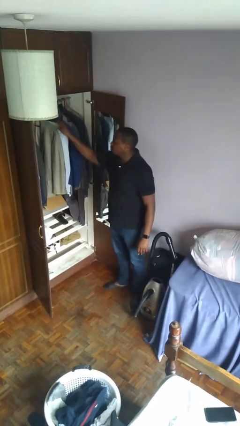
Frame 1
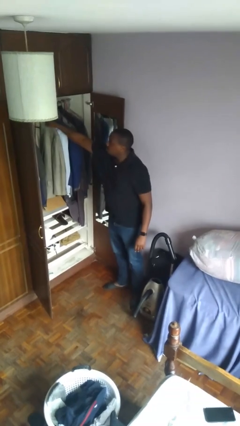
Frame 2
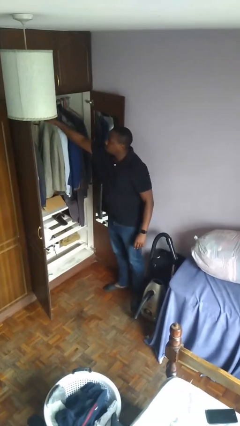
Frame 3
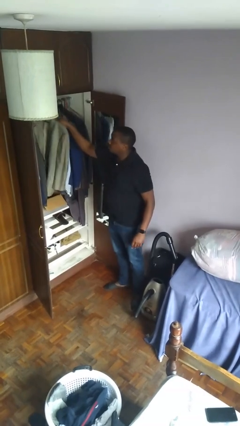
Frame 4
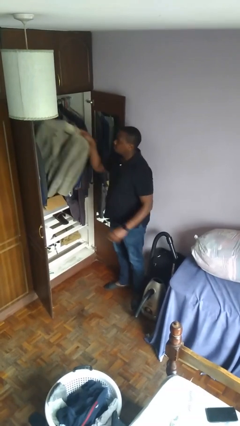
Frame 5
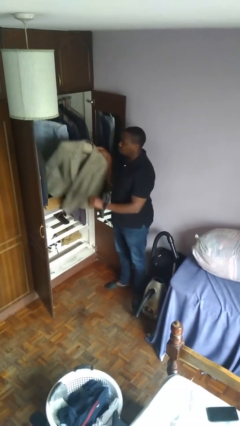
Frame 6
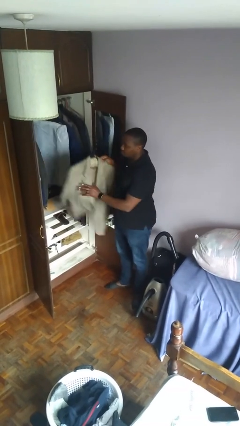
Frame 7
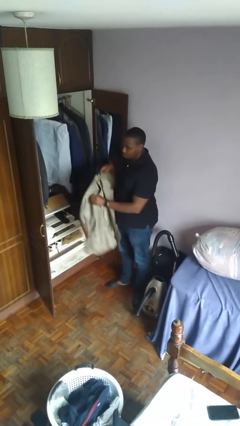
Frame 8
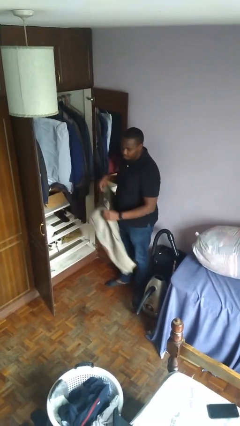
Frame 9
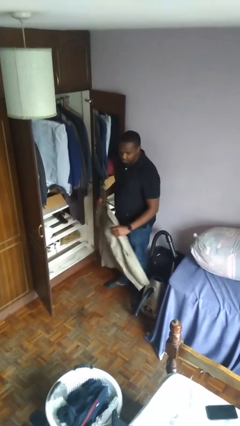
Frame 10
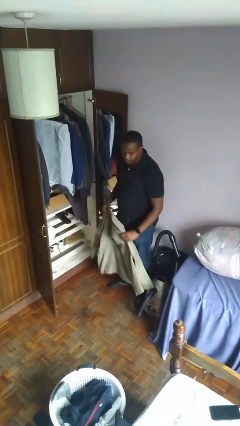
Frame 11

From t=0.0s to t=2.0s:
person takes clothes from closet

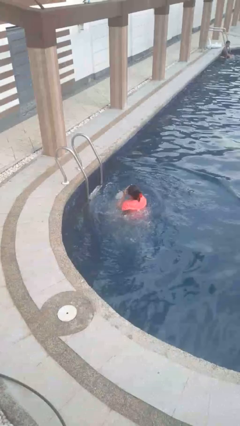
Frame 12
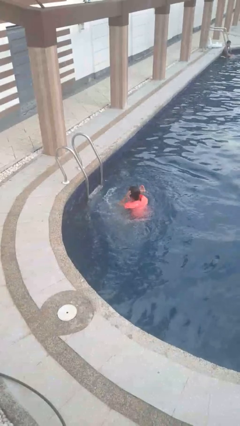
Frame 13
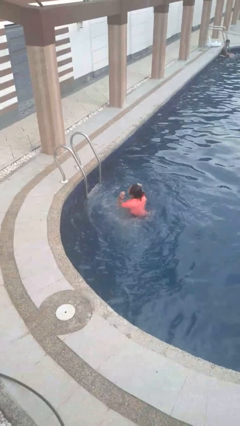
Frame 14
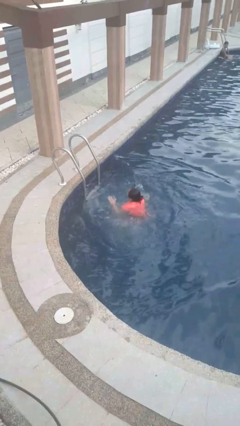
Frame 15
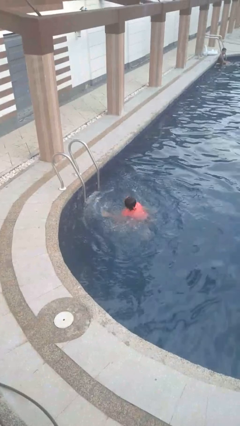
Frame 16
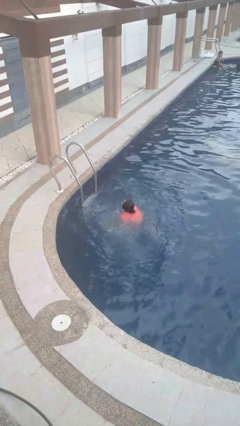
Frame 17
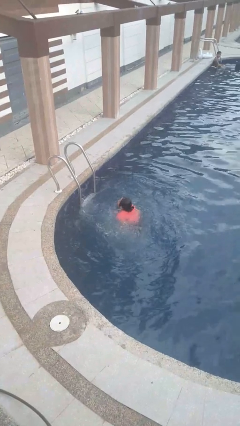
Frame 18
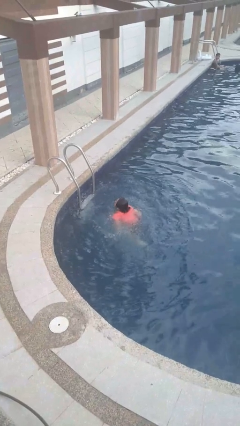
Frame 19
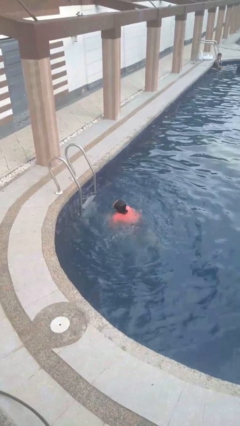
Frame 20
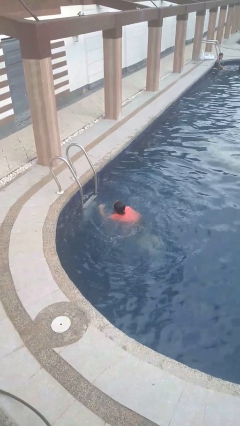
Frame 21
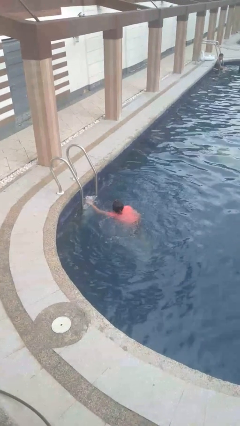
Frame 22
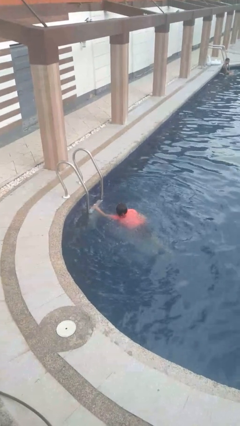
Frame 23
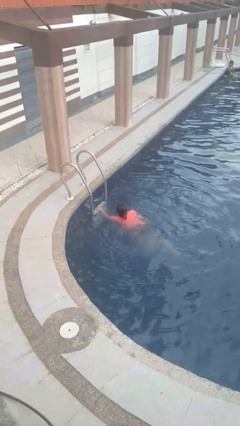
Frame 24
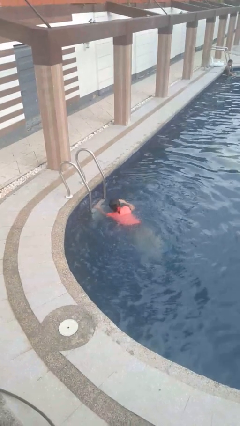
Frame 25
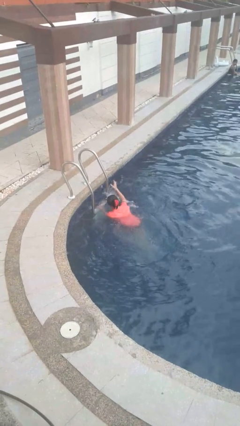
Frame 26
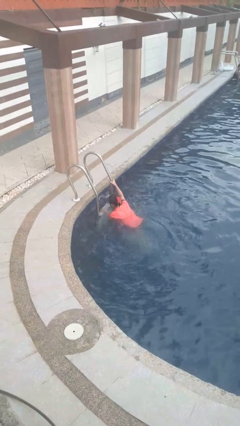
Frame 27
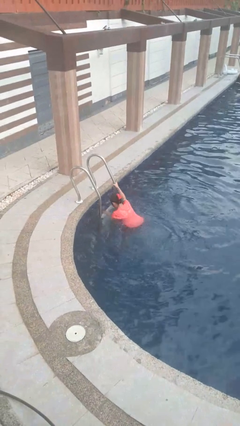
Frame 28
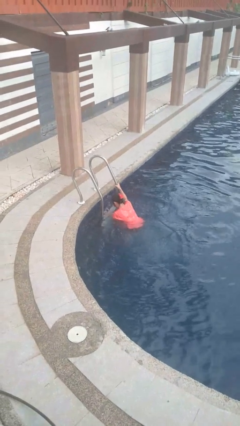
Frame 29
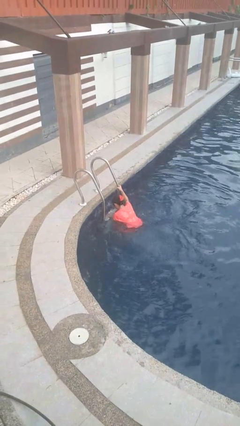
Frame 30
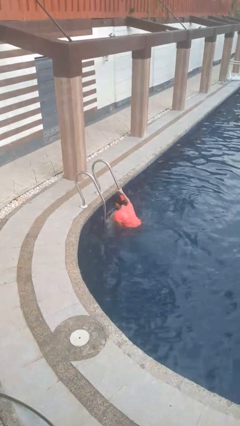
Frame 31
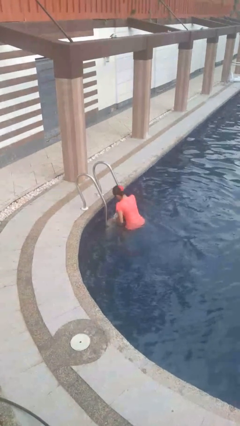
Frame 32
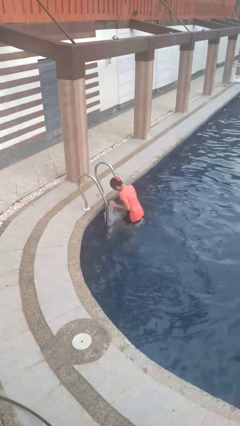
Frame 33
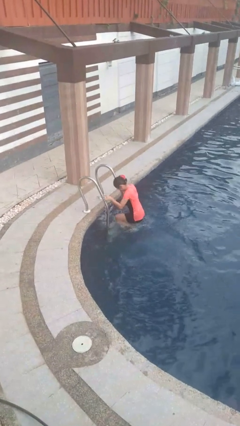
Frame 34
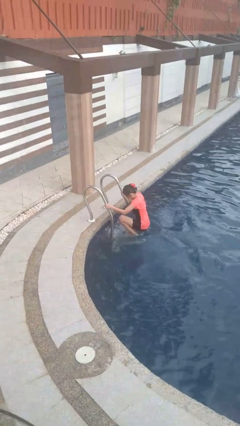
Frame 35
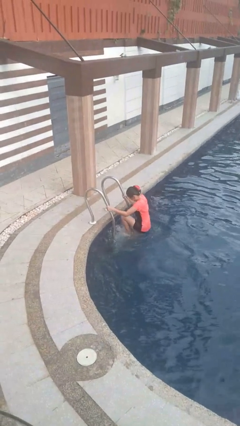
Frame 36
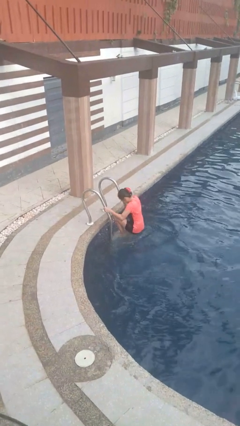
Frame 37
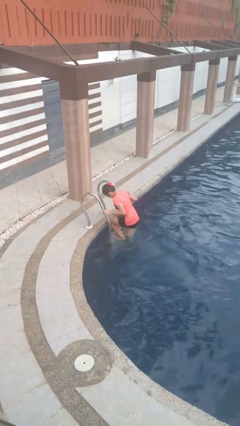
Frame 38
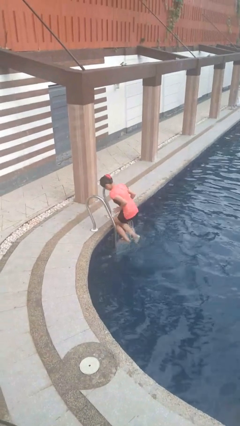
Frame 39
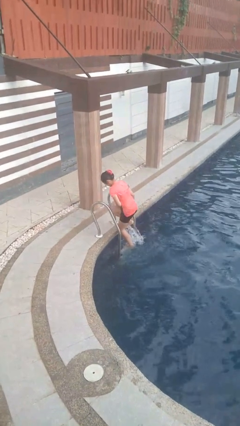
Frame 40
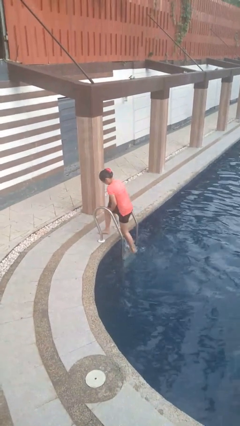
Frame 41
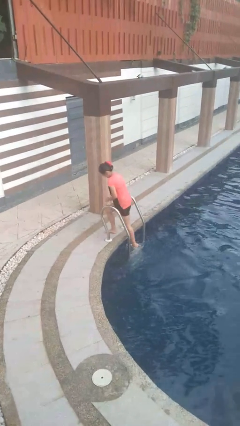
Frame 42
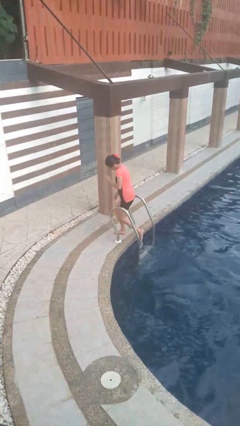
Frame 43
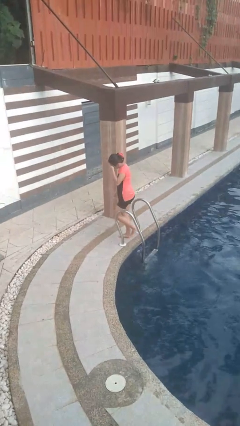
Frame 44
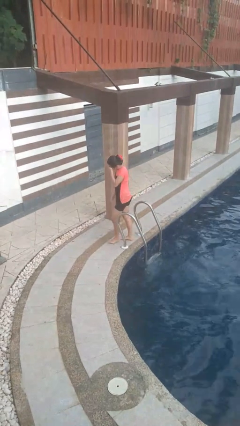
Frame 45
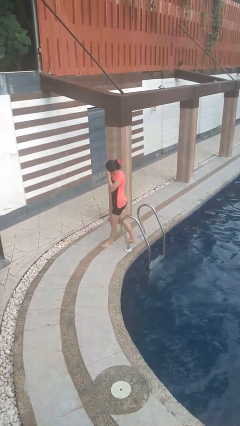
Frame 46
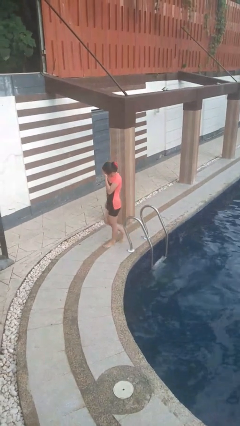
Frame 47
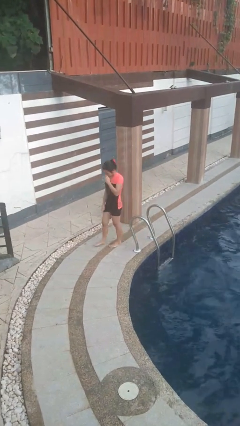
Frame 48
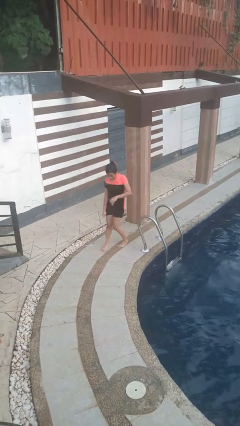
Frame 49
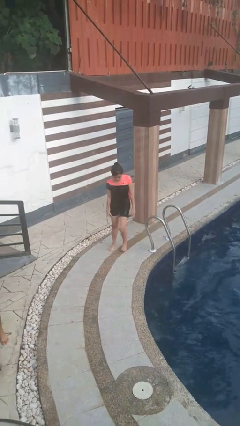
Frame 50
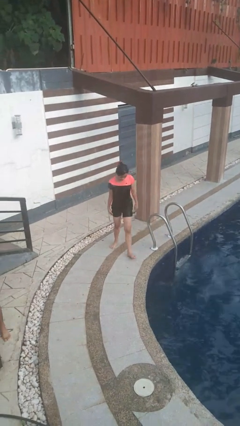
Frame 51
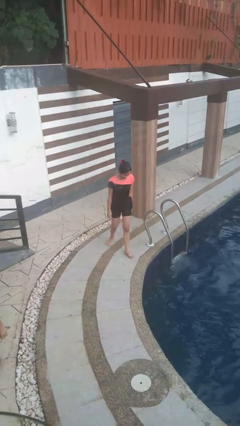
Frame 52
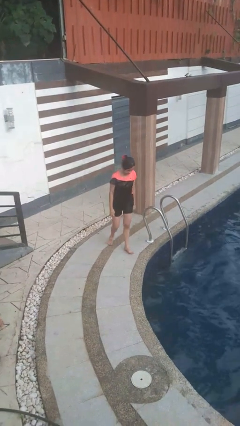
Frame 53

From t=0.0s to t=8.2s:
person exits pool

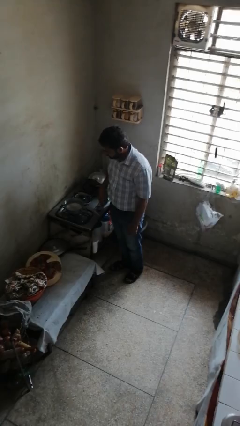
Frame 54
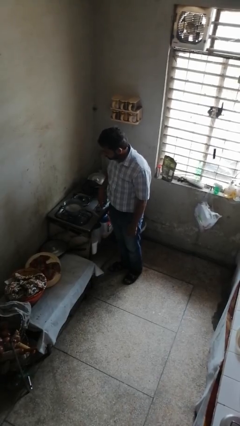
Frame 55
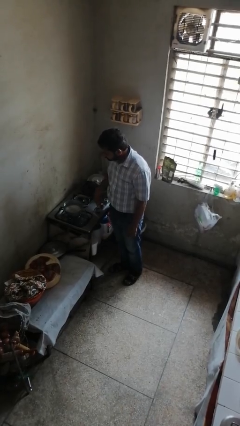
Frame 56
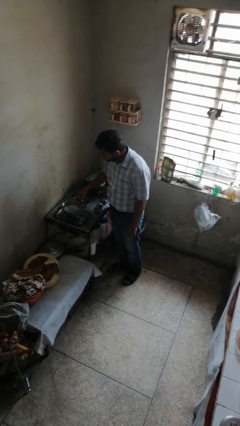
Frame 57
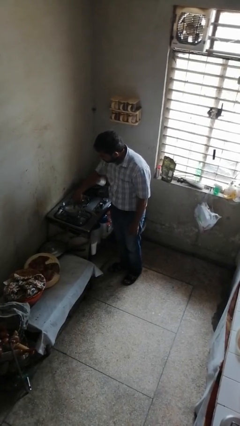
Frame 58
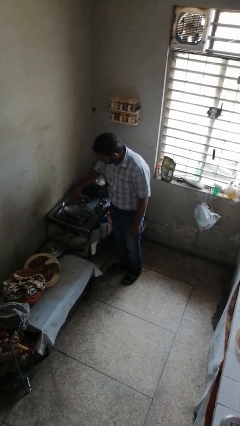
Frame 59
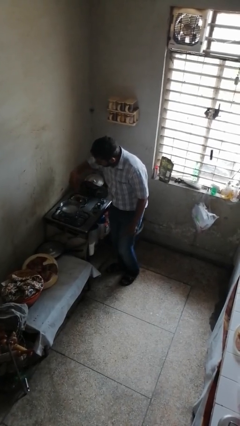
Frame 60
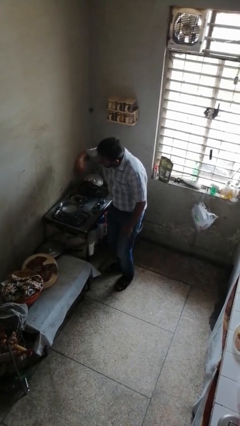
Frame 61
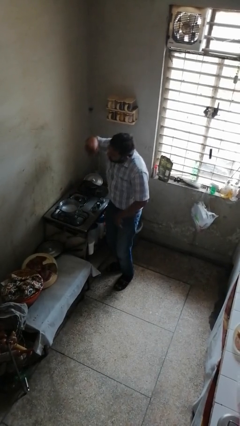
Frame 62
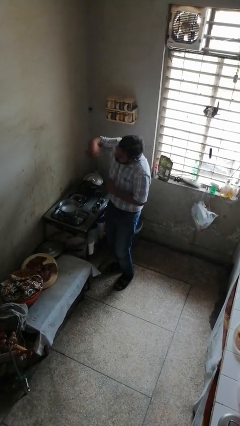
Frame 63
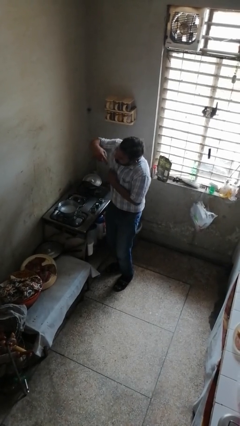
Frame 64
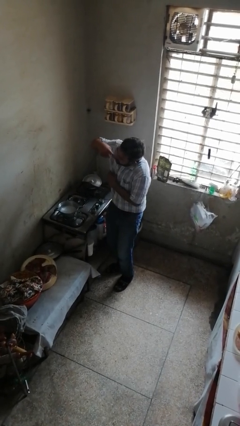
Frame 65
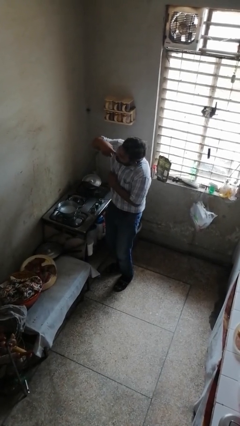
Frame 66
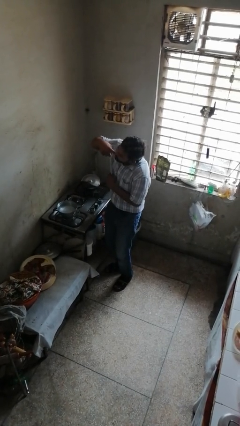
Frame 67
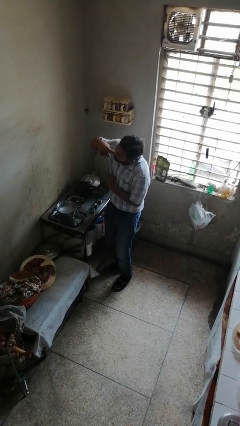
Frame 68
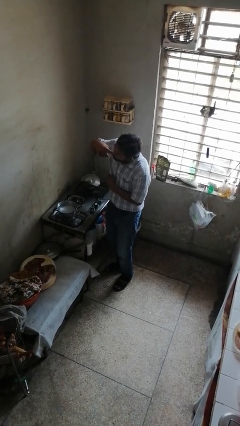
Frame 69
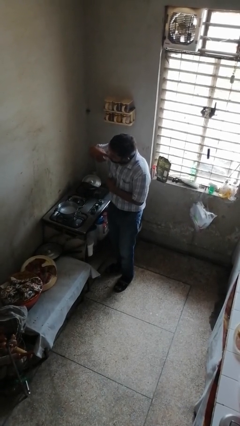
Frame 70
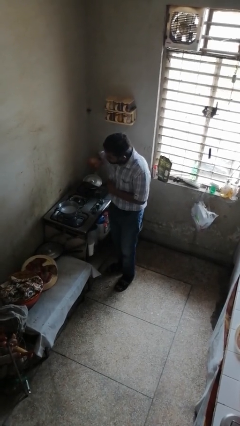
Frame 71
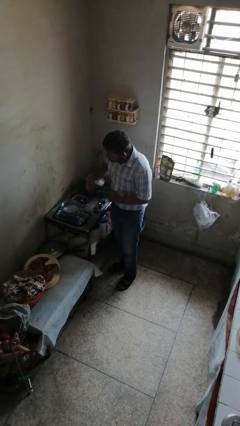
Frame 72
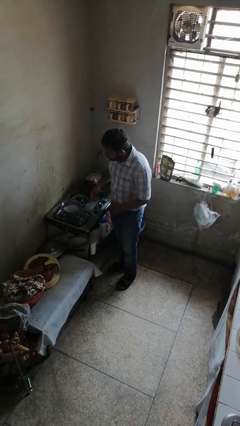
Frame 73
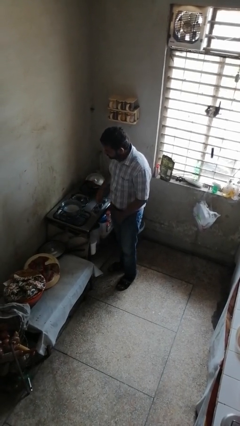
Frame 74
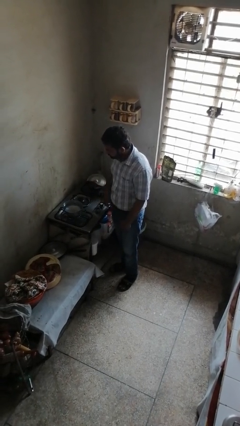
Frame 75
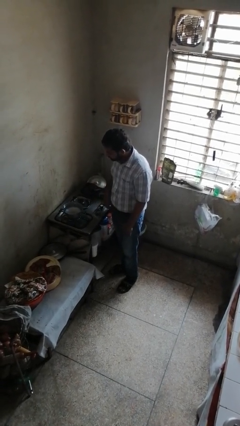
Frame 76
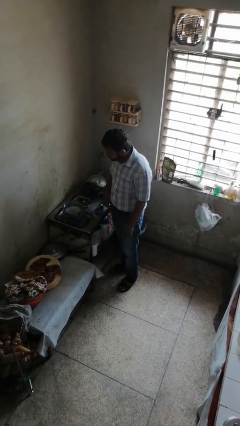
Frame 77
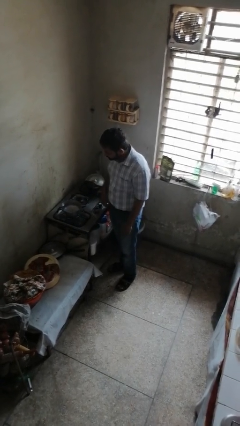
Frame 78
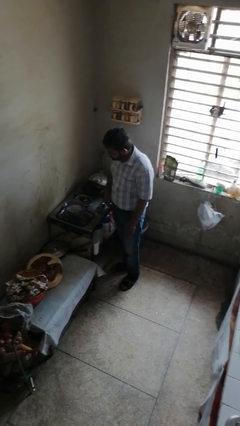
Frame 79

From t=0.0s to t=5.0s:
person burns hand

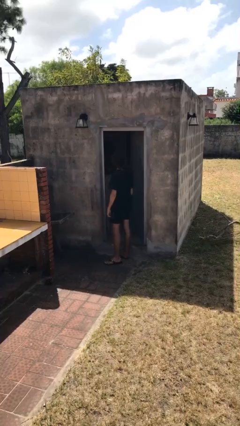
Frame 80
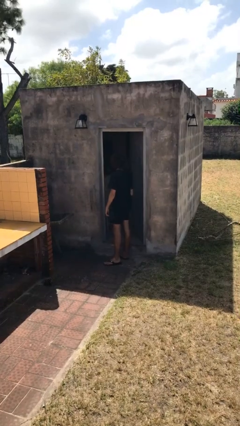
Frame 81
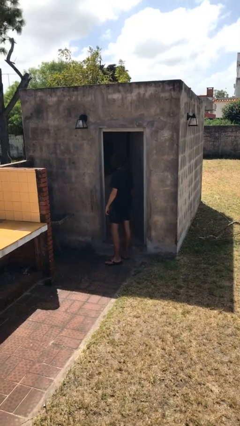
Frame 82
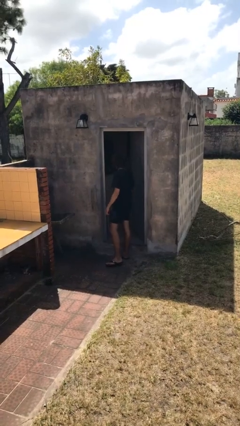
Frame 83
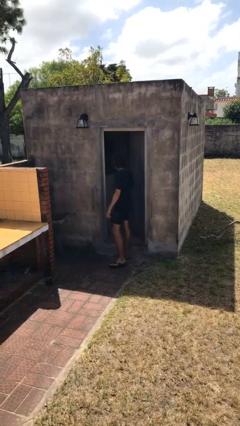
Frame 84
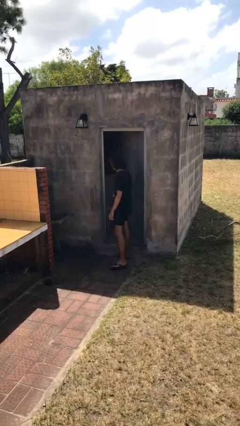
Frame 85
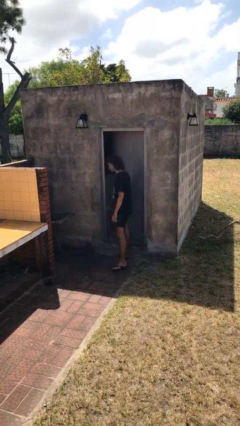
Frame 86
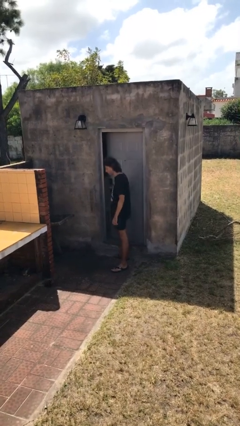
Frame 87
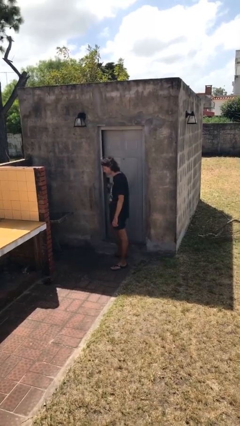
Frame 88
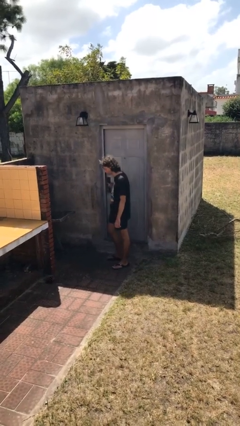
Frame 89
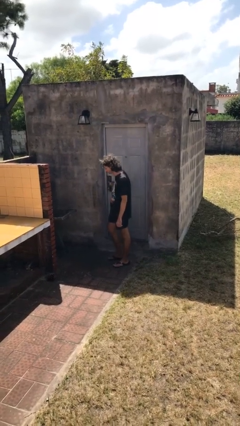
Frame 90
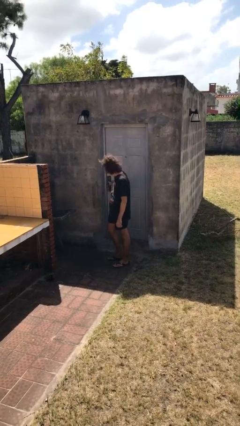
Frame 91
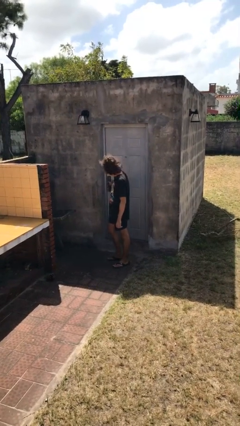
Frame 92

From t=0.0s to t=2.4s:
person closes facility door
